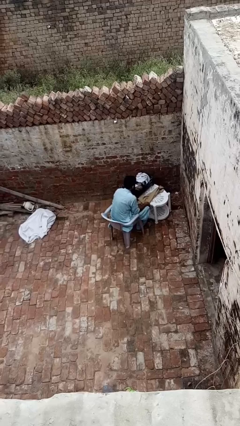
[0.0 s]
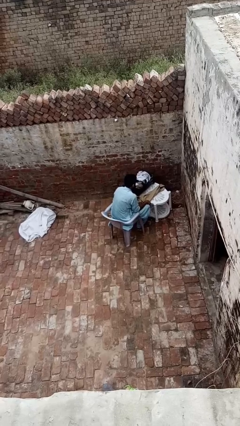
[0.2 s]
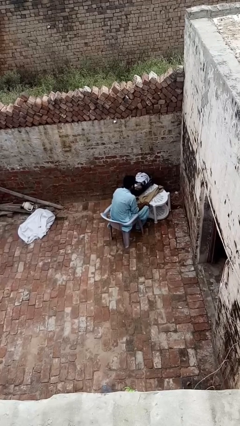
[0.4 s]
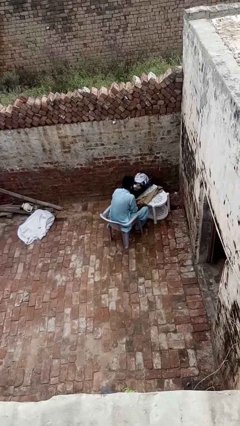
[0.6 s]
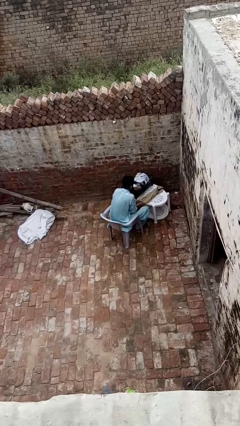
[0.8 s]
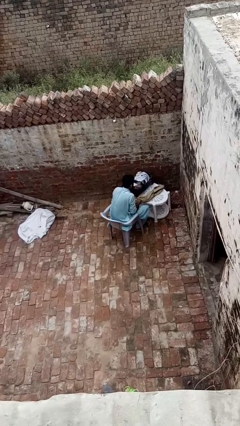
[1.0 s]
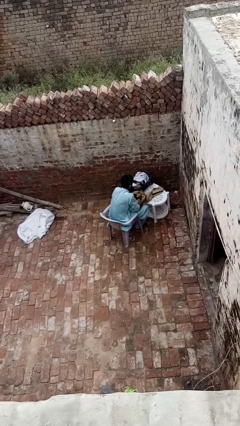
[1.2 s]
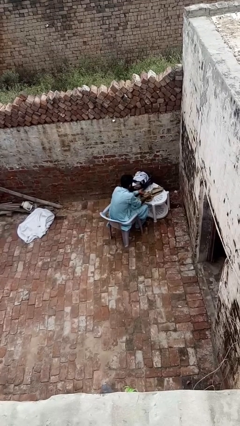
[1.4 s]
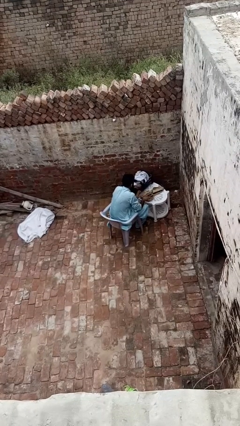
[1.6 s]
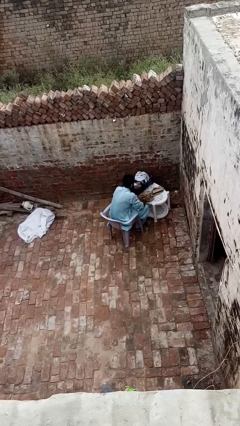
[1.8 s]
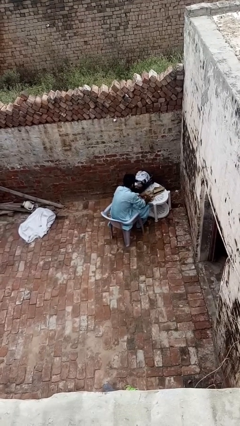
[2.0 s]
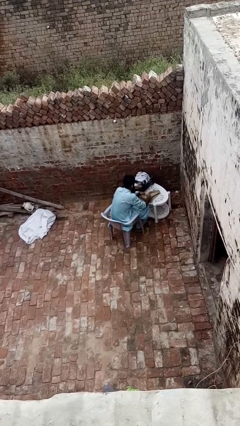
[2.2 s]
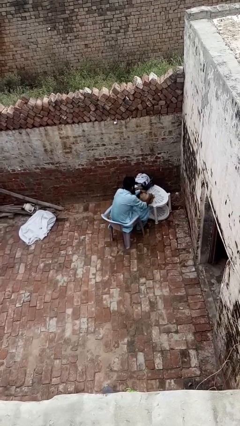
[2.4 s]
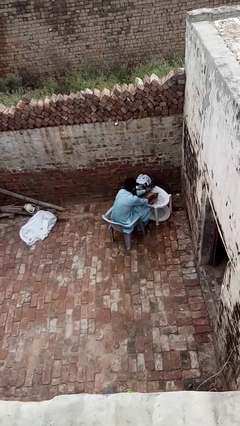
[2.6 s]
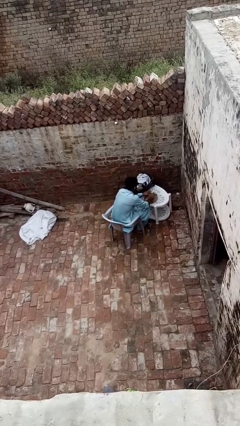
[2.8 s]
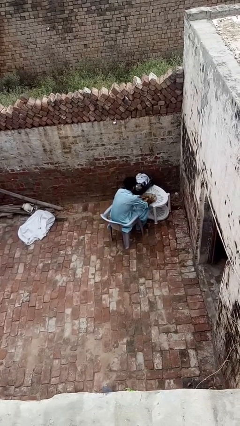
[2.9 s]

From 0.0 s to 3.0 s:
person folds shirt

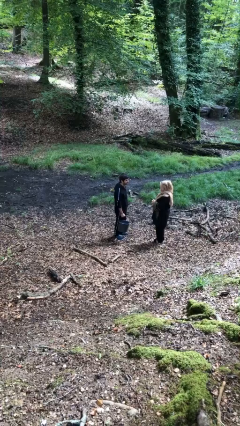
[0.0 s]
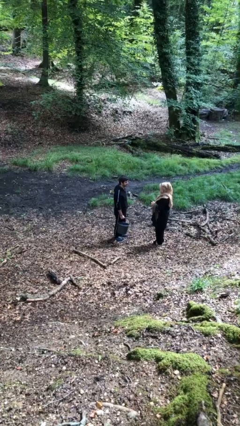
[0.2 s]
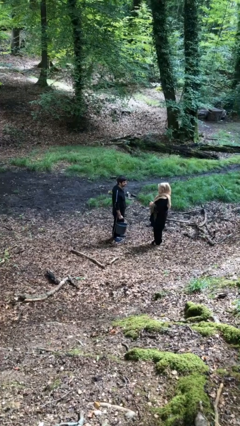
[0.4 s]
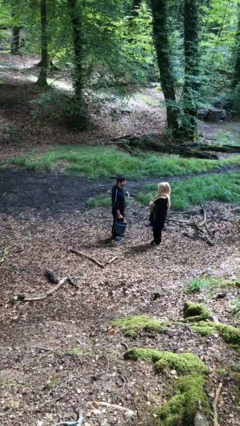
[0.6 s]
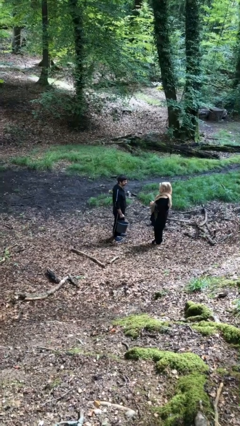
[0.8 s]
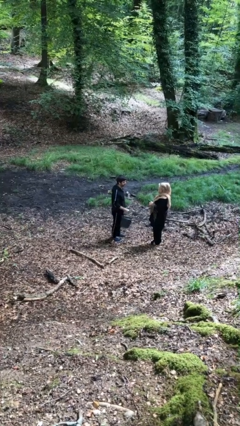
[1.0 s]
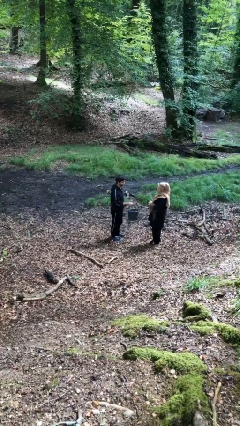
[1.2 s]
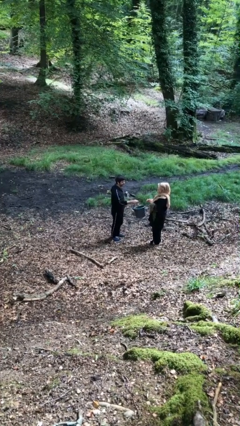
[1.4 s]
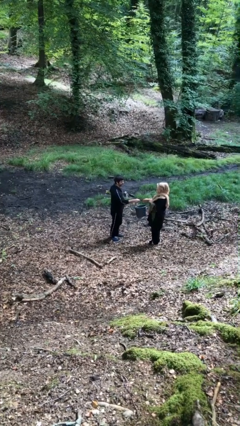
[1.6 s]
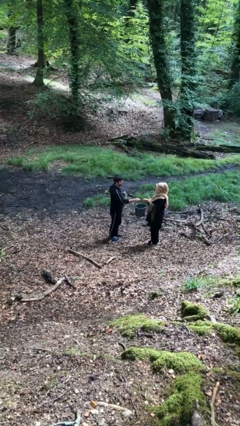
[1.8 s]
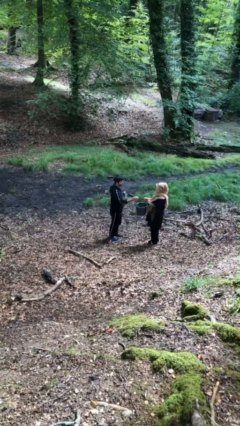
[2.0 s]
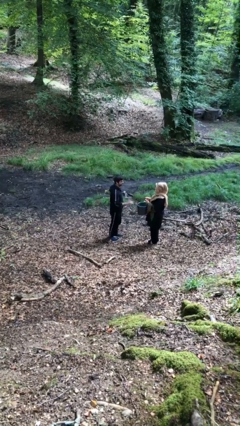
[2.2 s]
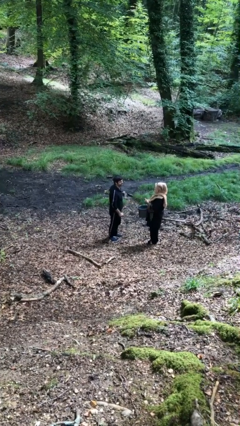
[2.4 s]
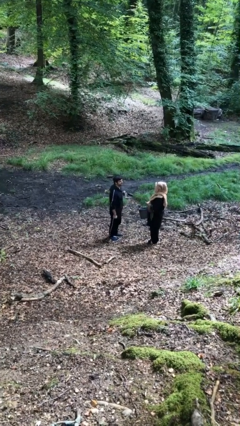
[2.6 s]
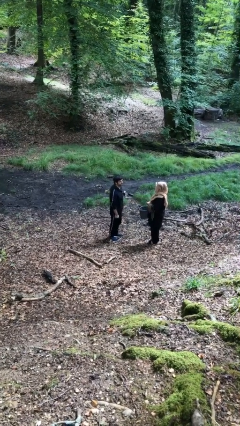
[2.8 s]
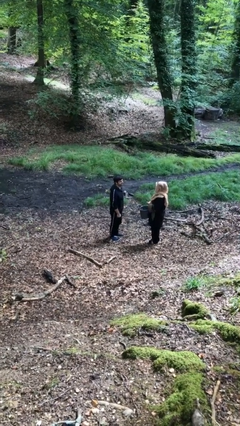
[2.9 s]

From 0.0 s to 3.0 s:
person transfers object to person

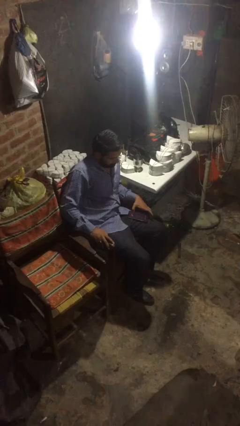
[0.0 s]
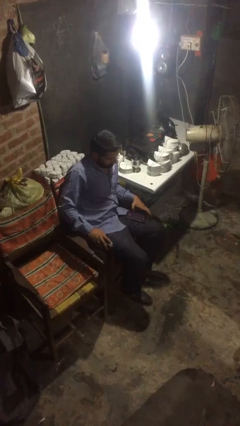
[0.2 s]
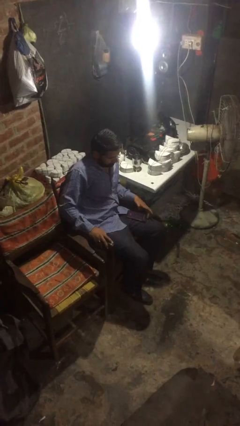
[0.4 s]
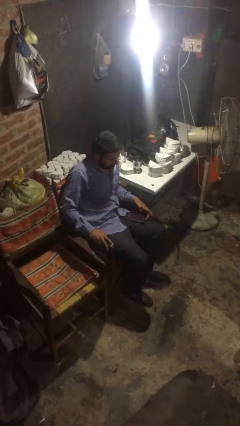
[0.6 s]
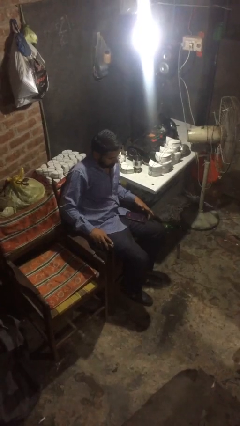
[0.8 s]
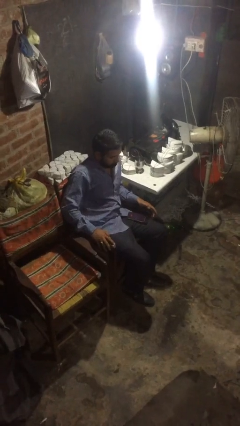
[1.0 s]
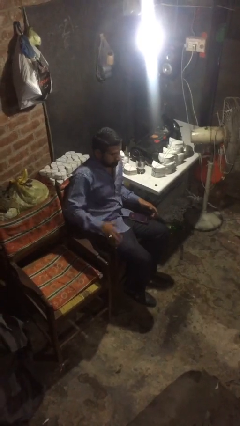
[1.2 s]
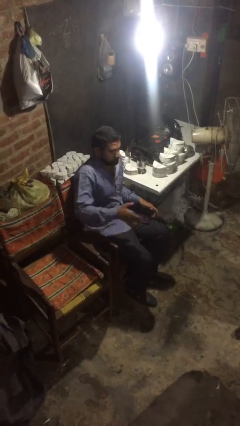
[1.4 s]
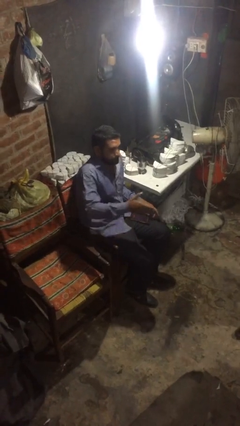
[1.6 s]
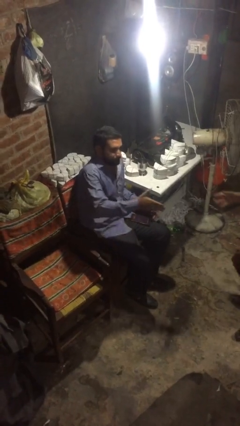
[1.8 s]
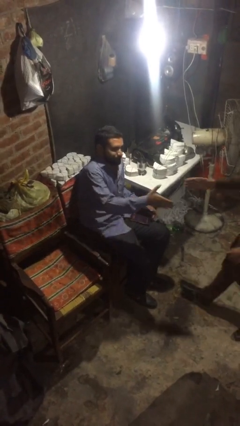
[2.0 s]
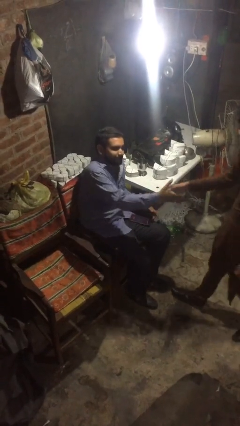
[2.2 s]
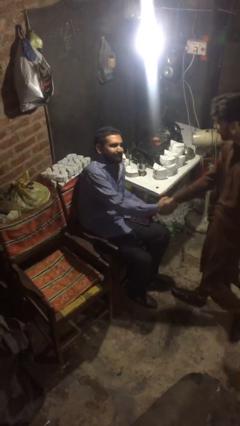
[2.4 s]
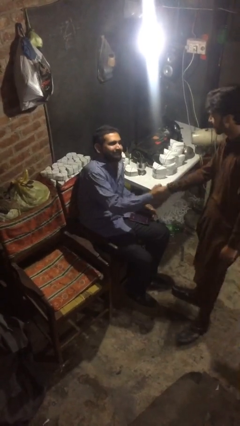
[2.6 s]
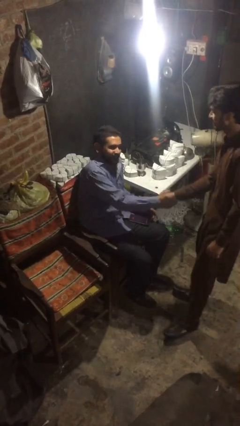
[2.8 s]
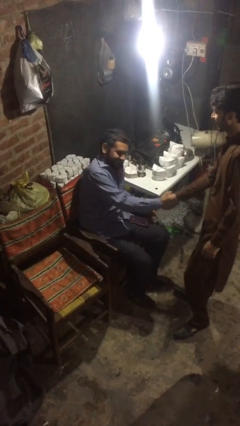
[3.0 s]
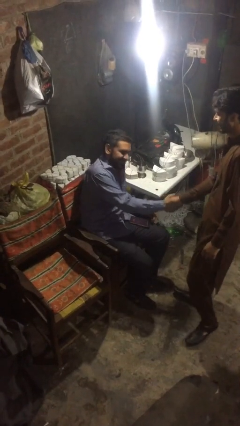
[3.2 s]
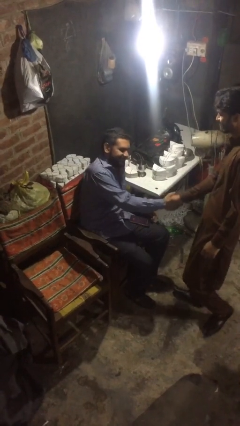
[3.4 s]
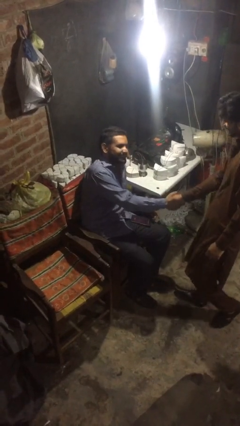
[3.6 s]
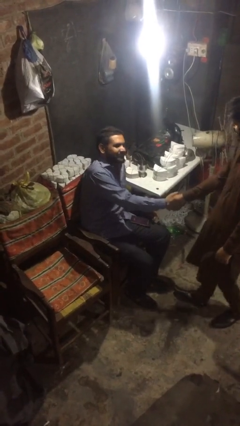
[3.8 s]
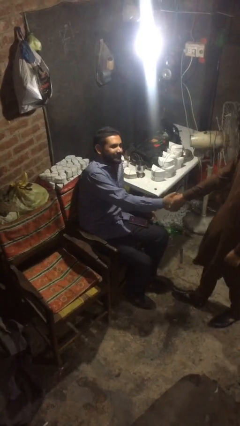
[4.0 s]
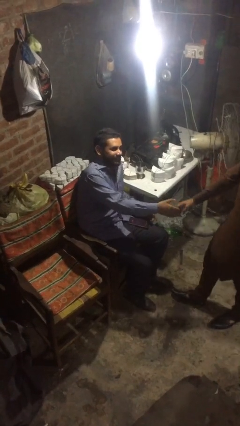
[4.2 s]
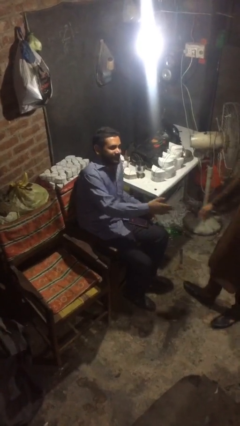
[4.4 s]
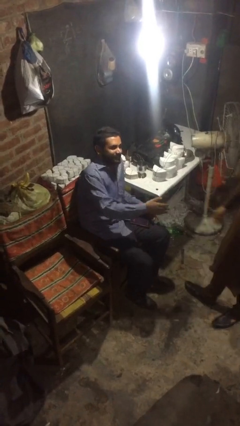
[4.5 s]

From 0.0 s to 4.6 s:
person shakes hand

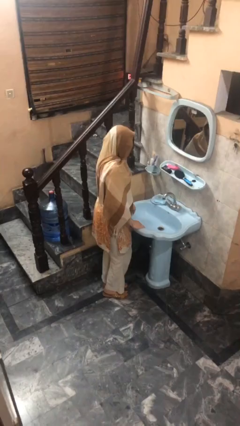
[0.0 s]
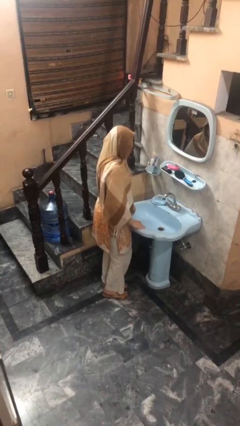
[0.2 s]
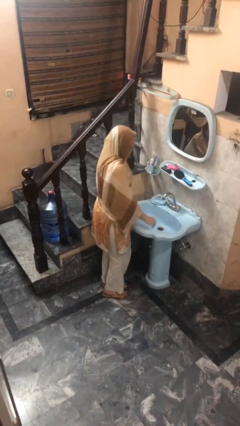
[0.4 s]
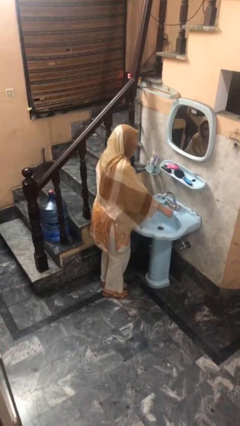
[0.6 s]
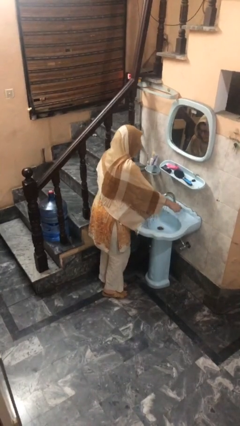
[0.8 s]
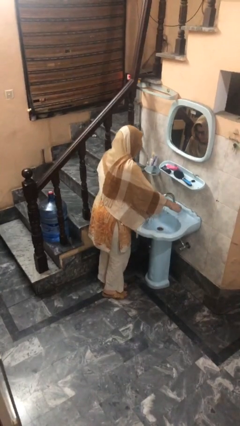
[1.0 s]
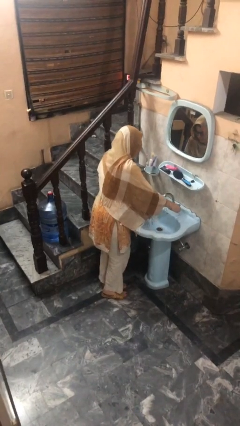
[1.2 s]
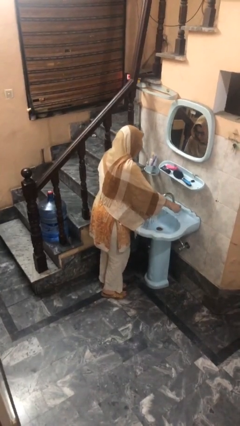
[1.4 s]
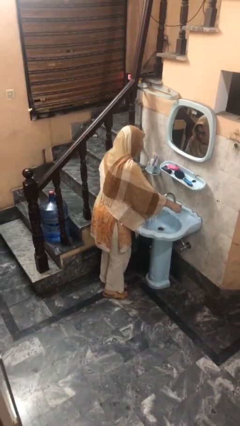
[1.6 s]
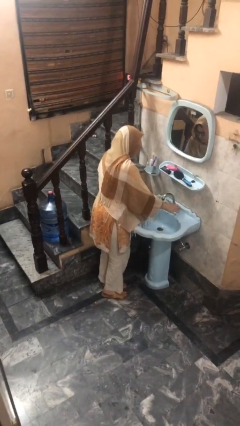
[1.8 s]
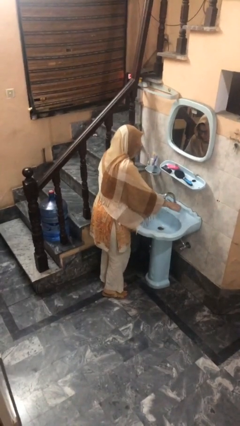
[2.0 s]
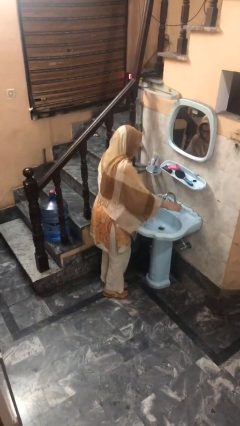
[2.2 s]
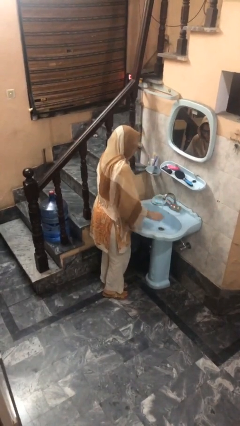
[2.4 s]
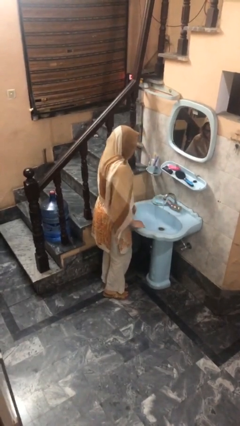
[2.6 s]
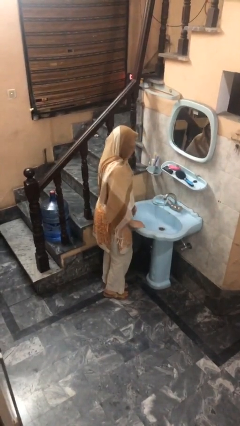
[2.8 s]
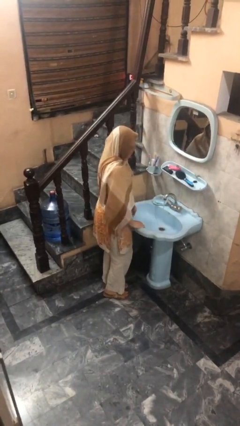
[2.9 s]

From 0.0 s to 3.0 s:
person turns on faucet

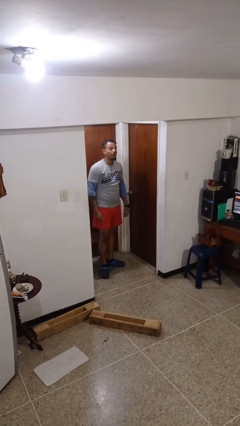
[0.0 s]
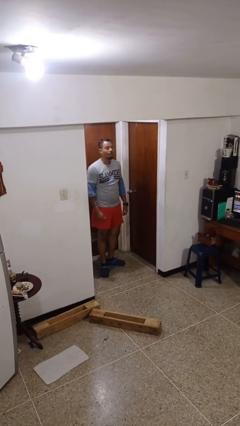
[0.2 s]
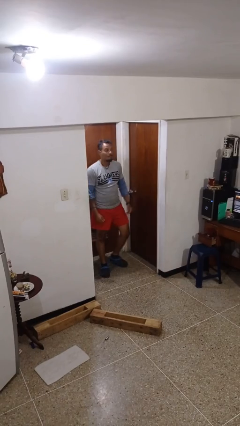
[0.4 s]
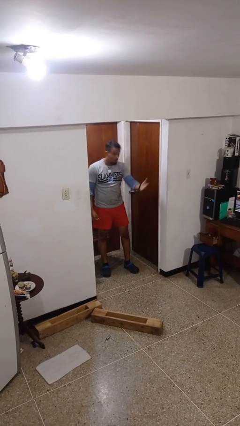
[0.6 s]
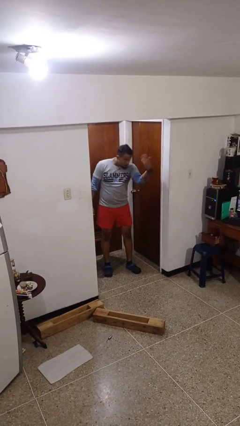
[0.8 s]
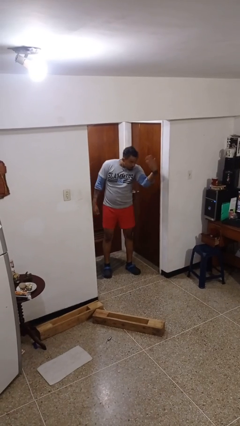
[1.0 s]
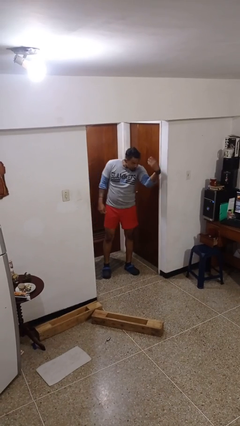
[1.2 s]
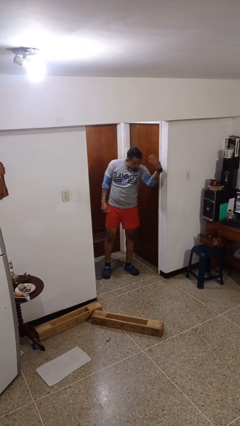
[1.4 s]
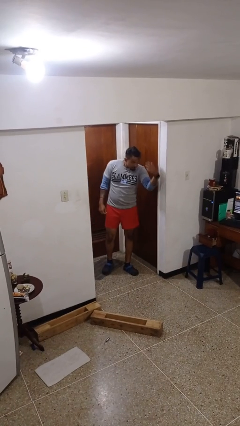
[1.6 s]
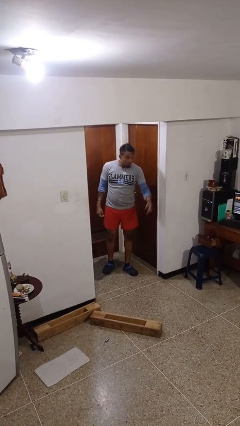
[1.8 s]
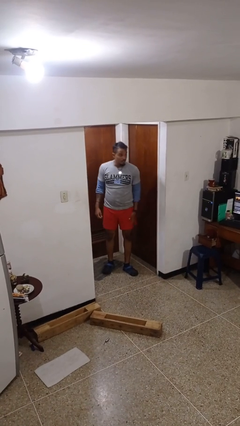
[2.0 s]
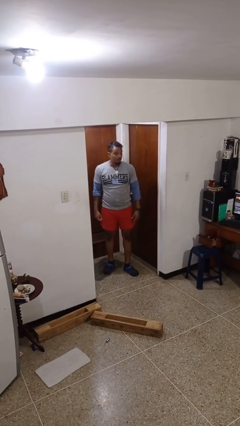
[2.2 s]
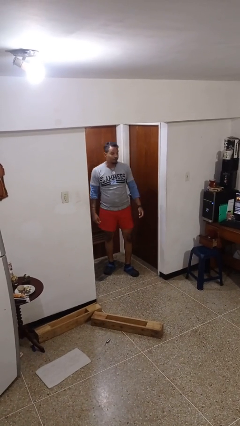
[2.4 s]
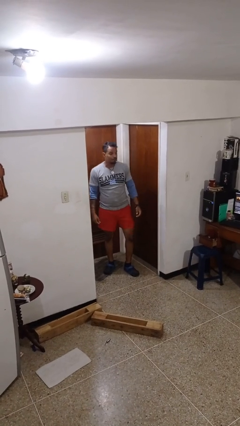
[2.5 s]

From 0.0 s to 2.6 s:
person gestures come here

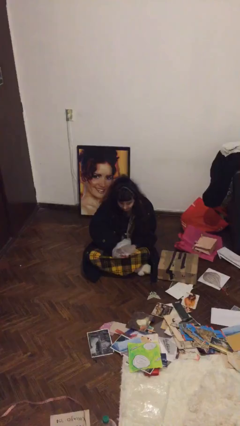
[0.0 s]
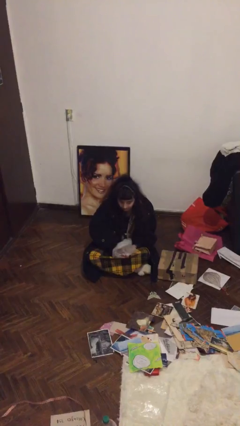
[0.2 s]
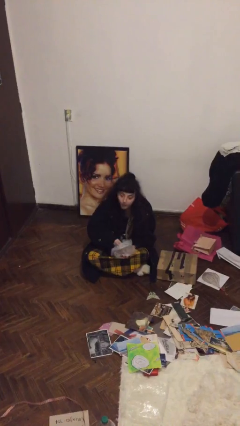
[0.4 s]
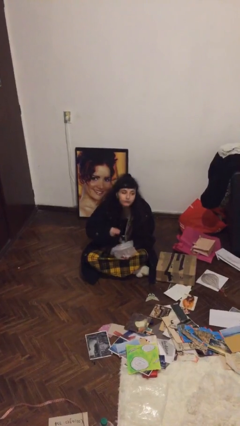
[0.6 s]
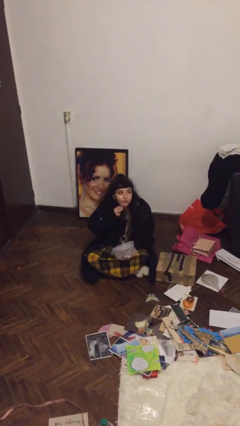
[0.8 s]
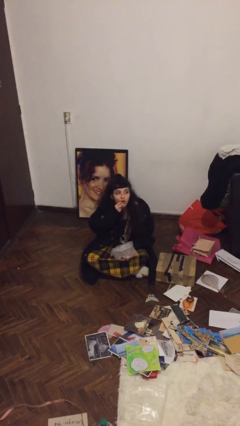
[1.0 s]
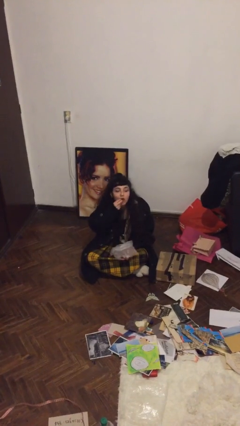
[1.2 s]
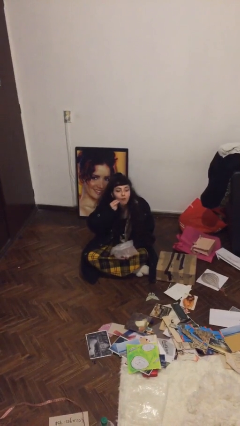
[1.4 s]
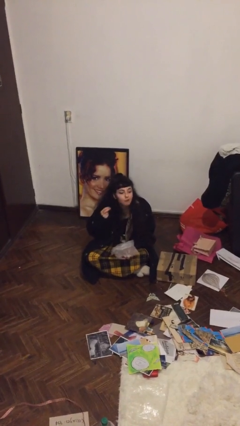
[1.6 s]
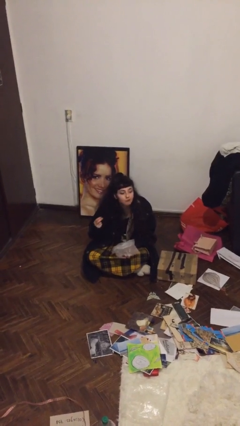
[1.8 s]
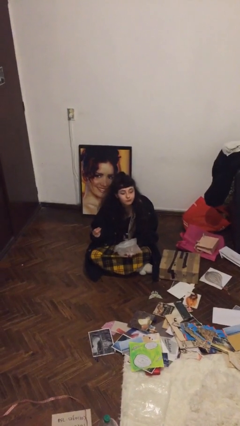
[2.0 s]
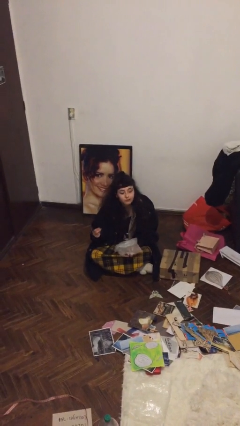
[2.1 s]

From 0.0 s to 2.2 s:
person eats snack from bag
